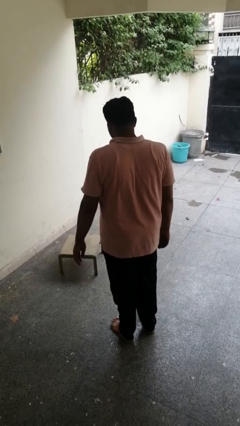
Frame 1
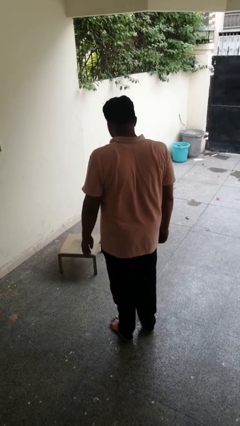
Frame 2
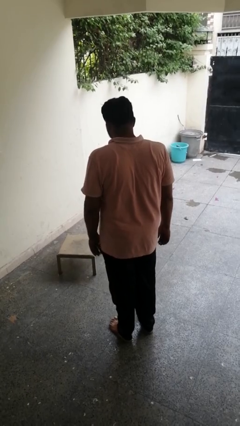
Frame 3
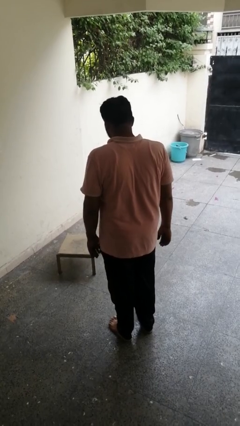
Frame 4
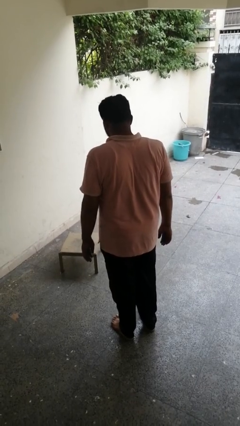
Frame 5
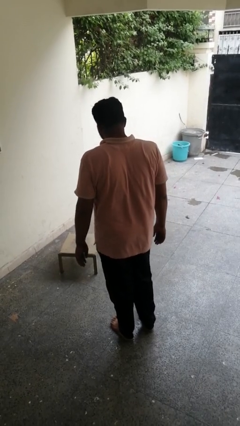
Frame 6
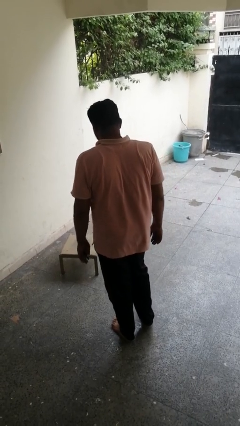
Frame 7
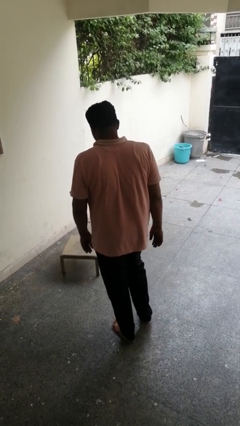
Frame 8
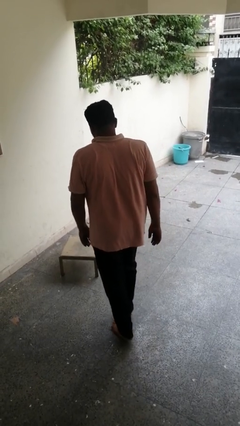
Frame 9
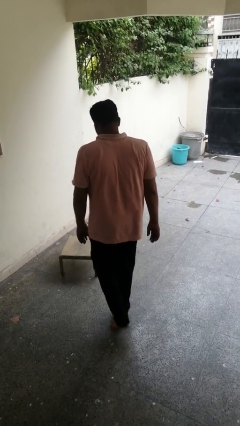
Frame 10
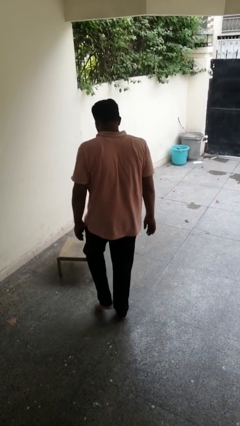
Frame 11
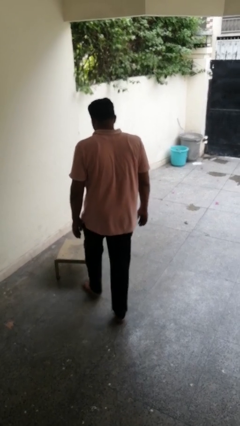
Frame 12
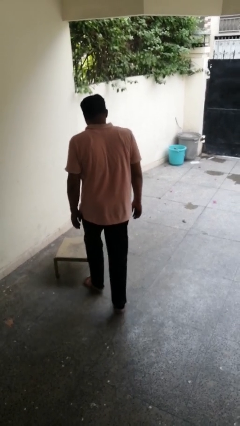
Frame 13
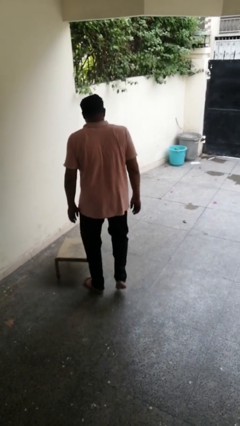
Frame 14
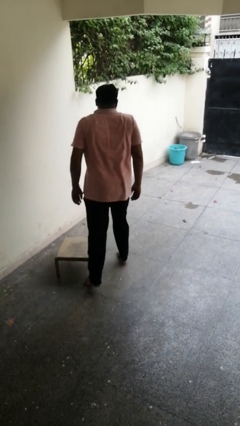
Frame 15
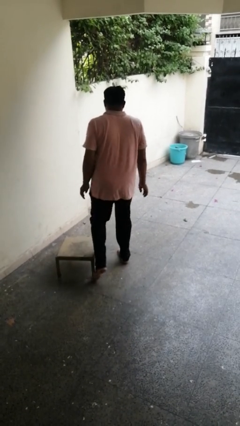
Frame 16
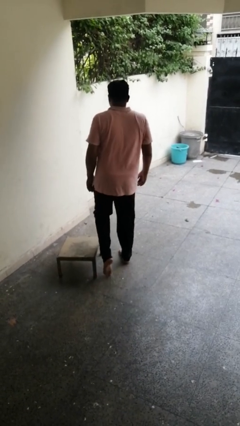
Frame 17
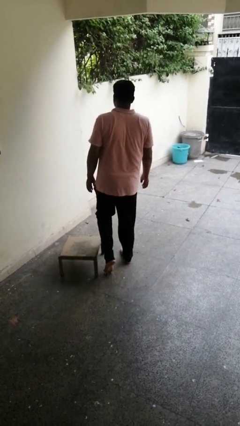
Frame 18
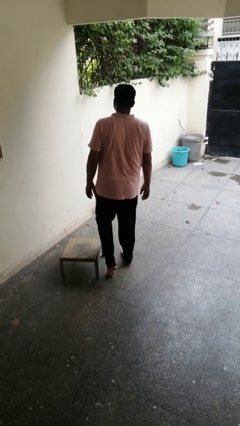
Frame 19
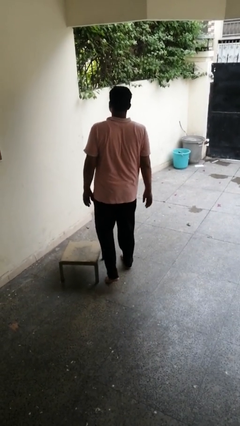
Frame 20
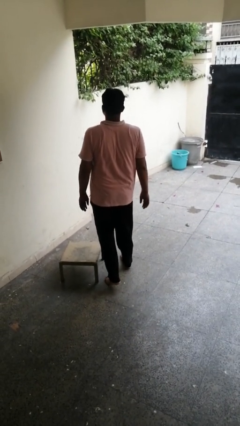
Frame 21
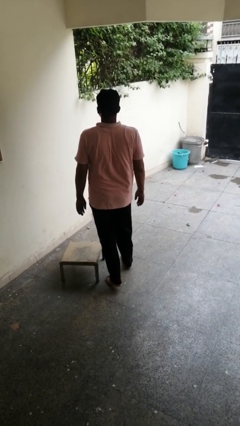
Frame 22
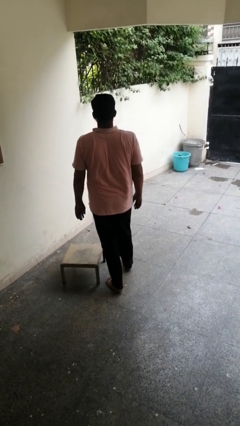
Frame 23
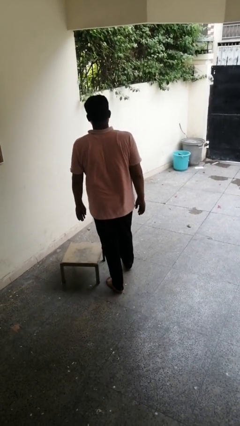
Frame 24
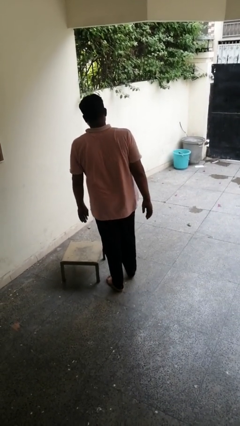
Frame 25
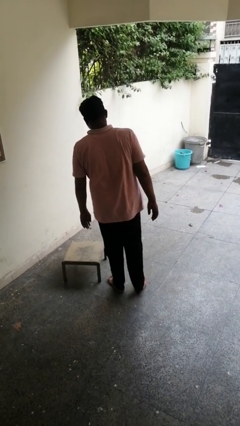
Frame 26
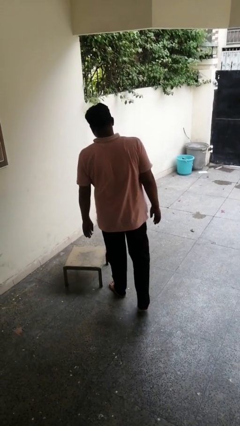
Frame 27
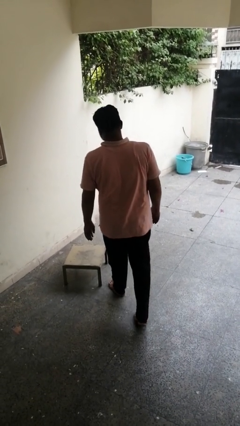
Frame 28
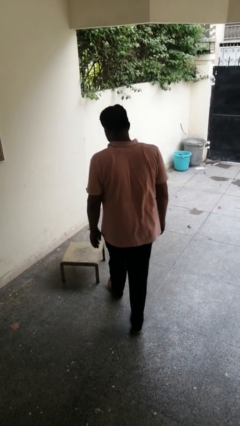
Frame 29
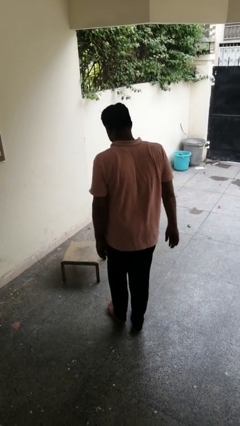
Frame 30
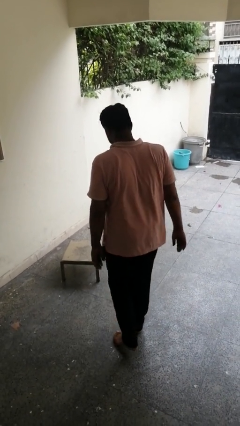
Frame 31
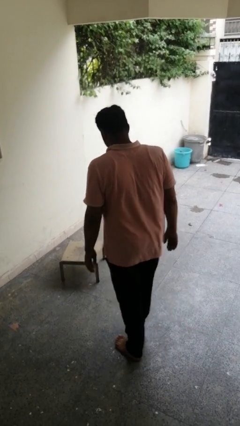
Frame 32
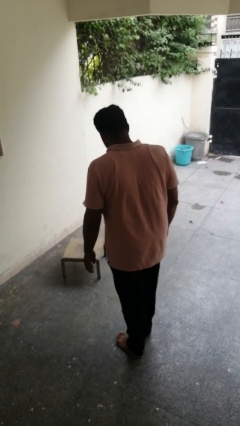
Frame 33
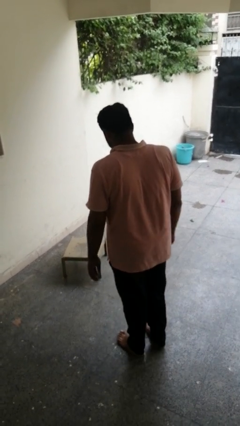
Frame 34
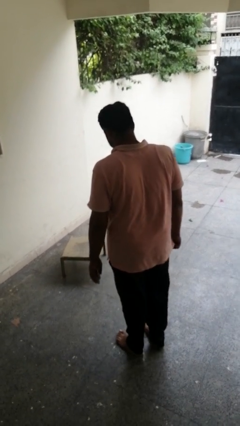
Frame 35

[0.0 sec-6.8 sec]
person stubs toe

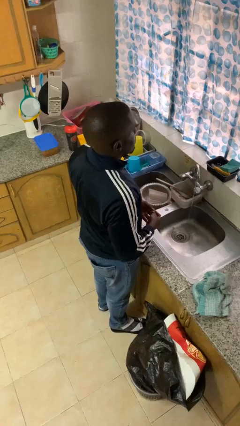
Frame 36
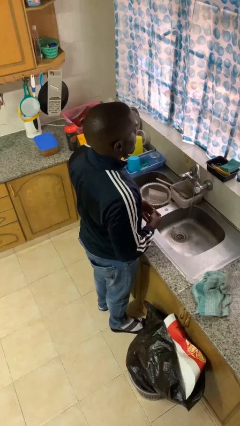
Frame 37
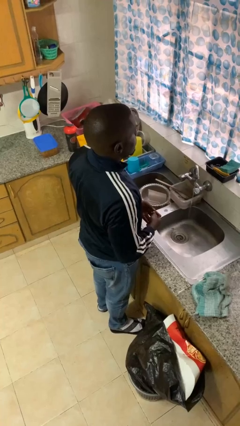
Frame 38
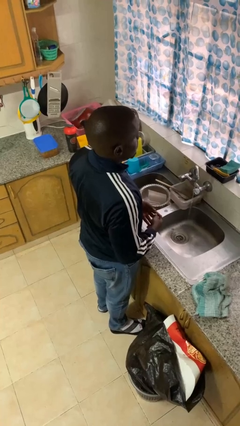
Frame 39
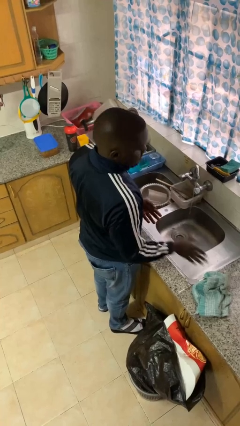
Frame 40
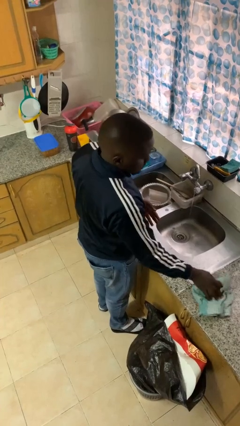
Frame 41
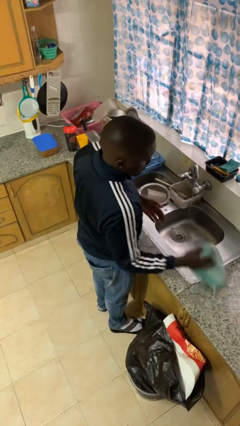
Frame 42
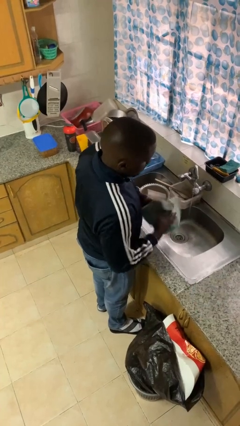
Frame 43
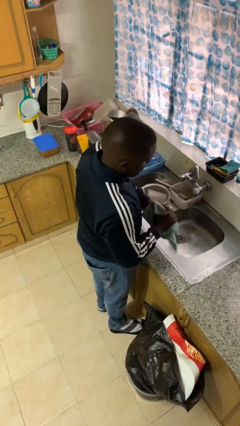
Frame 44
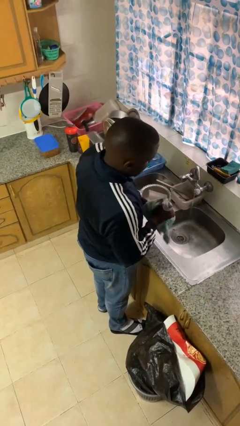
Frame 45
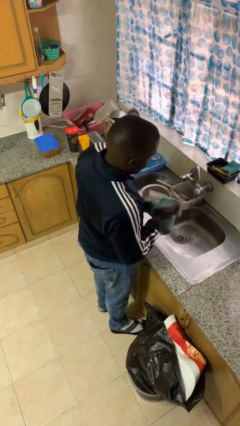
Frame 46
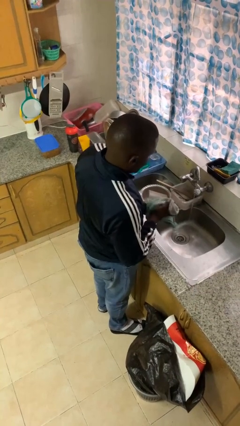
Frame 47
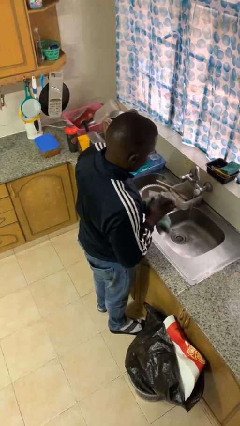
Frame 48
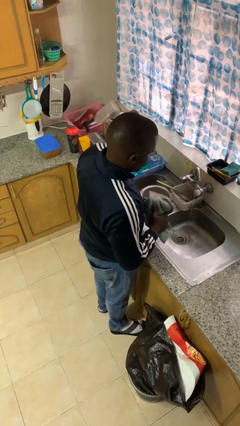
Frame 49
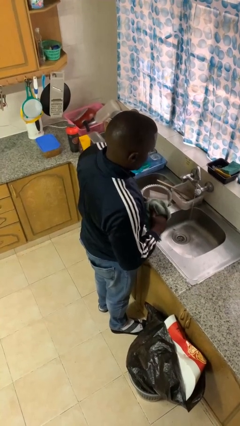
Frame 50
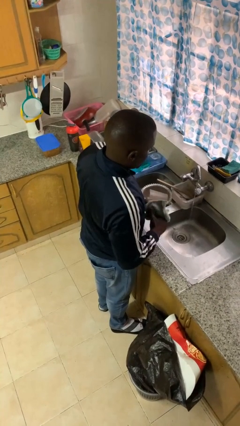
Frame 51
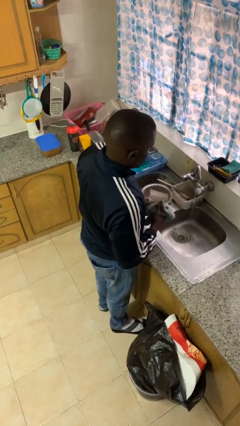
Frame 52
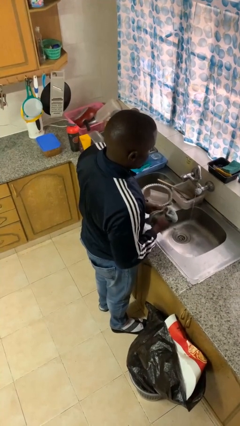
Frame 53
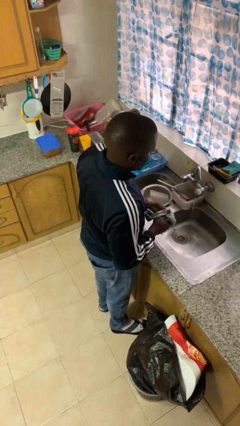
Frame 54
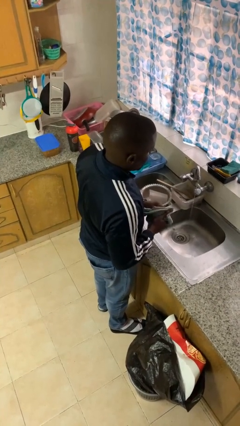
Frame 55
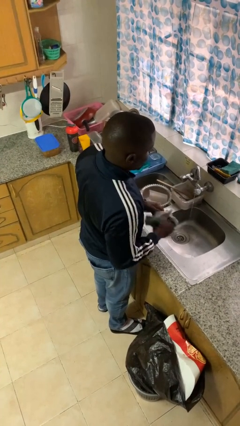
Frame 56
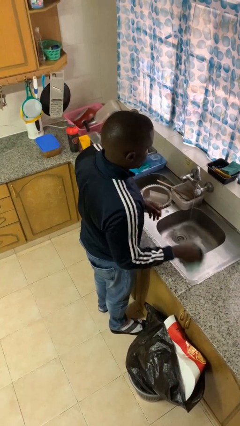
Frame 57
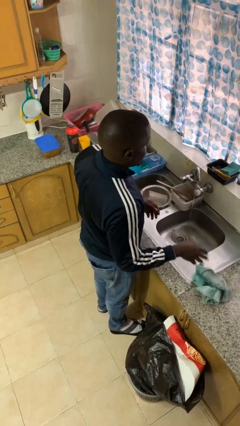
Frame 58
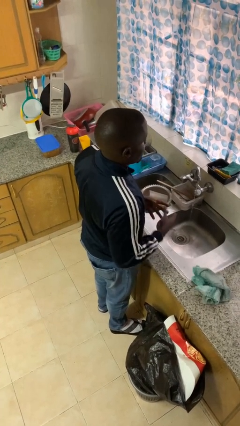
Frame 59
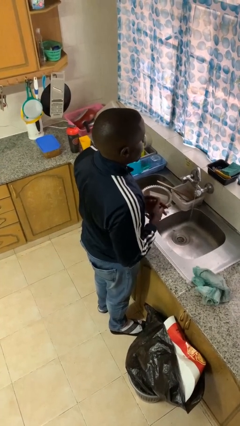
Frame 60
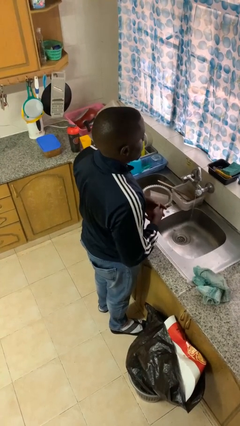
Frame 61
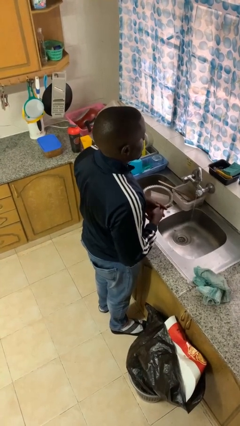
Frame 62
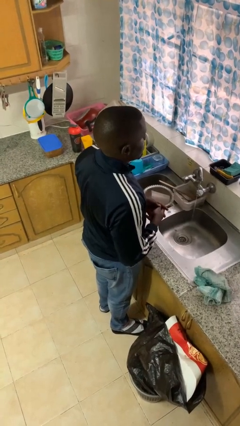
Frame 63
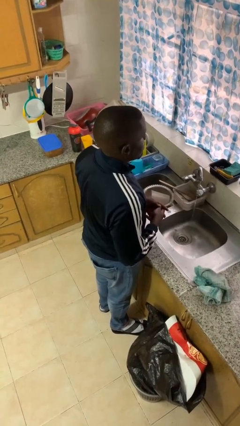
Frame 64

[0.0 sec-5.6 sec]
person dries hands with towel

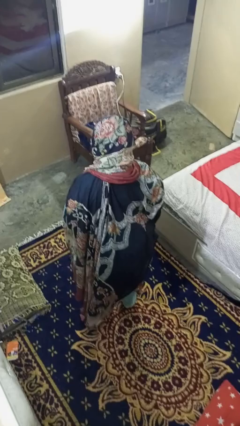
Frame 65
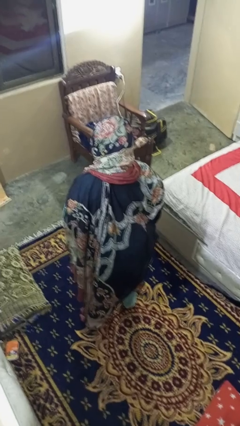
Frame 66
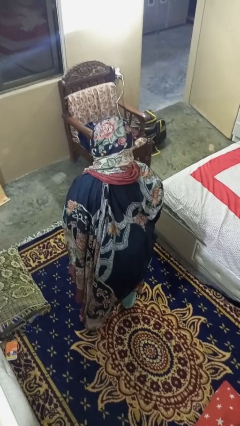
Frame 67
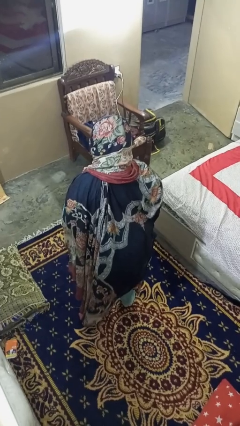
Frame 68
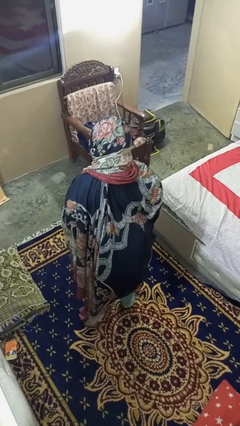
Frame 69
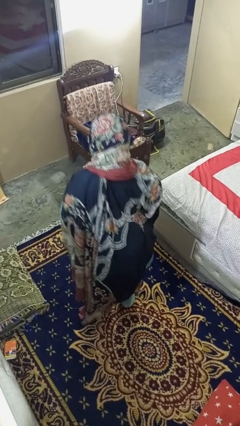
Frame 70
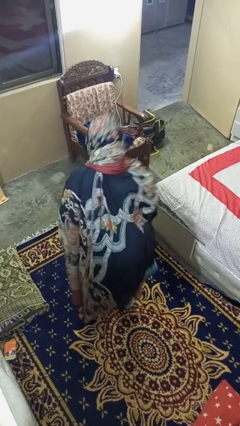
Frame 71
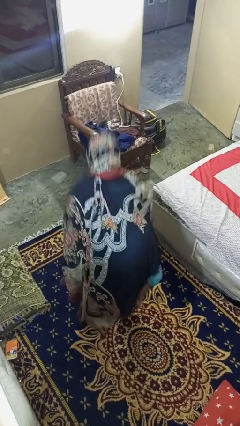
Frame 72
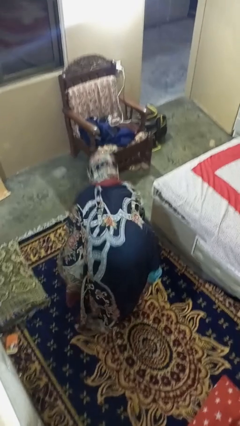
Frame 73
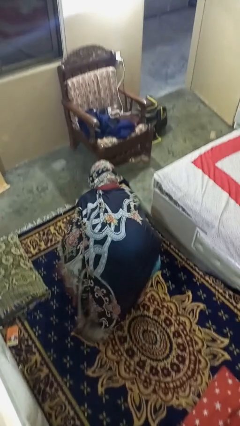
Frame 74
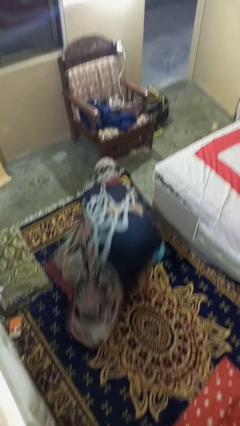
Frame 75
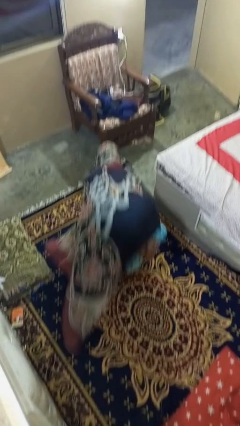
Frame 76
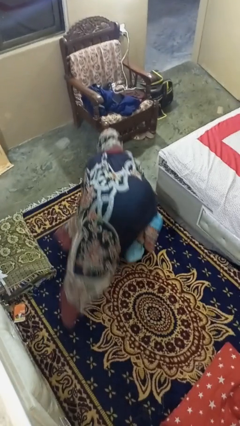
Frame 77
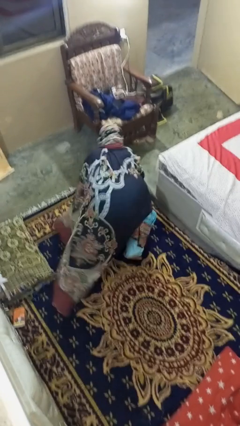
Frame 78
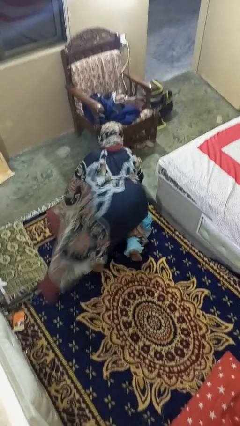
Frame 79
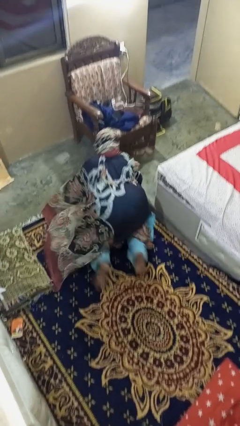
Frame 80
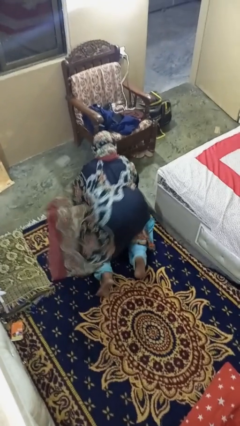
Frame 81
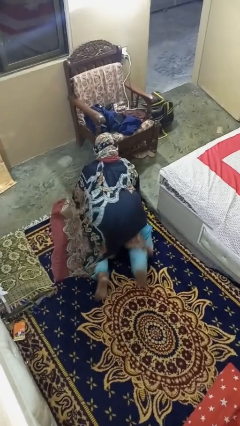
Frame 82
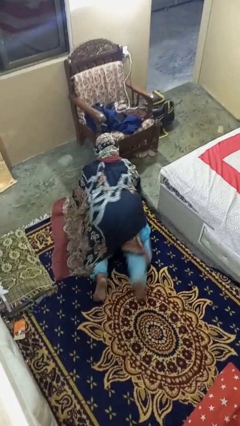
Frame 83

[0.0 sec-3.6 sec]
person exercises with pushup

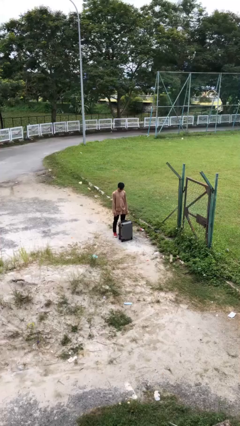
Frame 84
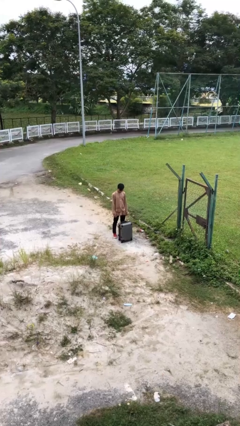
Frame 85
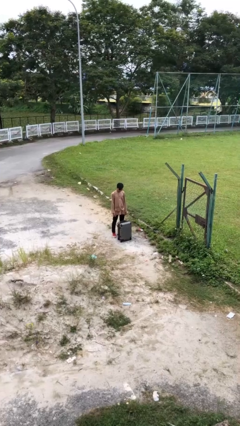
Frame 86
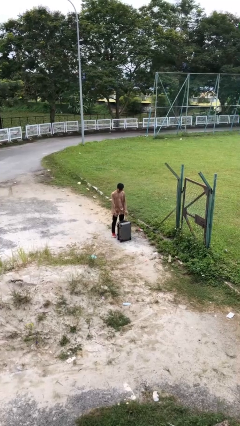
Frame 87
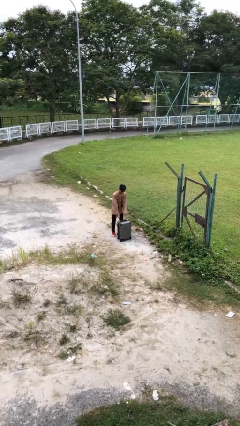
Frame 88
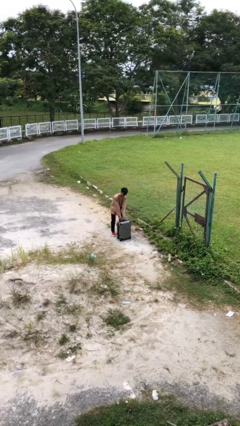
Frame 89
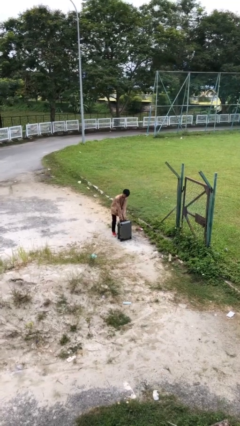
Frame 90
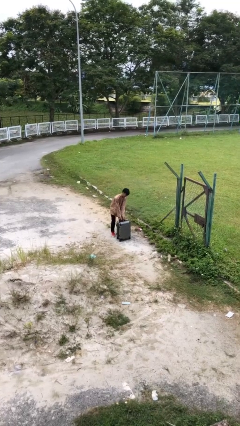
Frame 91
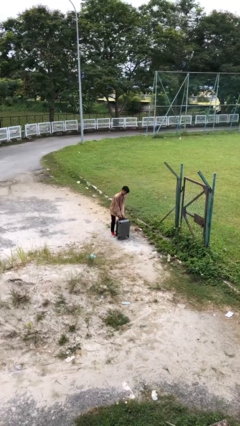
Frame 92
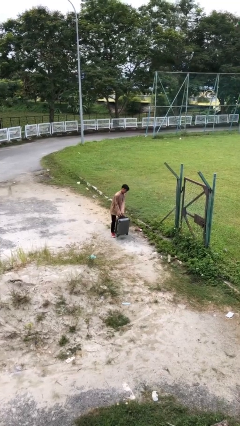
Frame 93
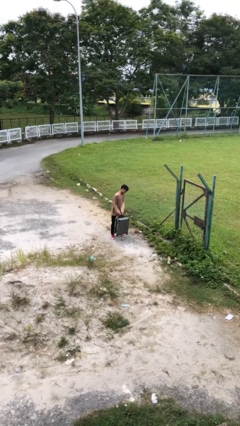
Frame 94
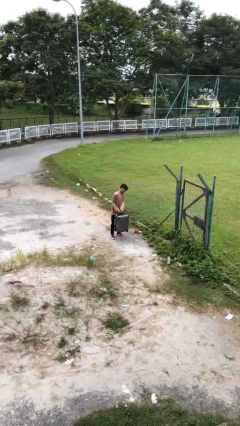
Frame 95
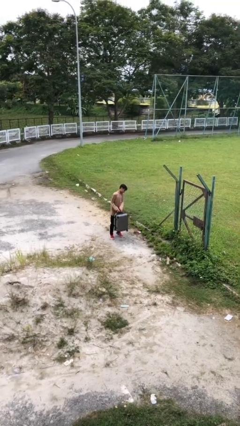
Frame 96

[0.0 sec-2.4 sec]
person picks up object from floor
